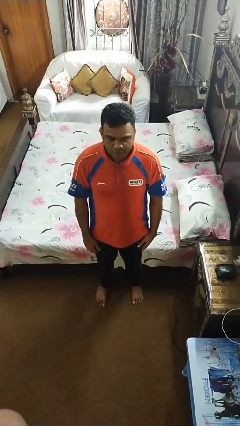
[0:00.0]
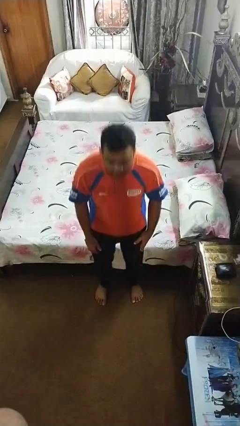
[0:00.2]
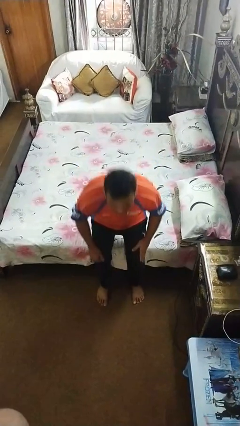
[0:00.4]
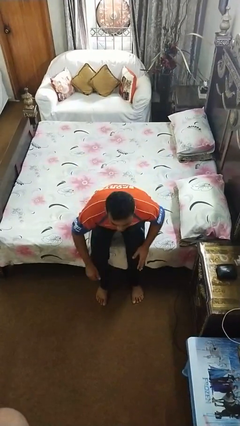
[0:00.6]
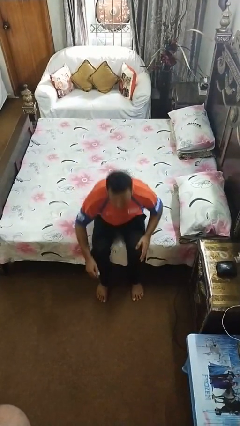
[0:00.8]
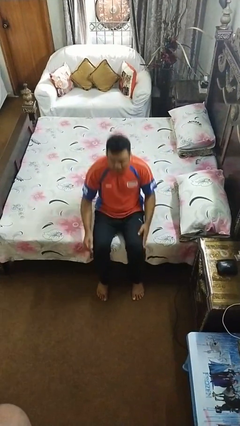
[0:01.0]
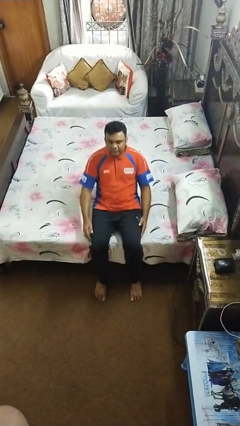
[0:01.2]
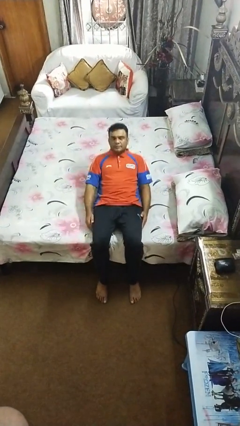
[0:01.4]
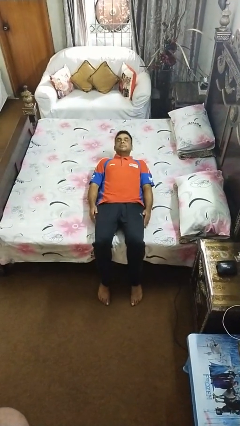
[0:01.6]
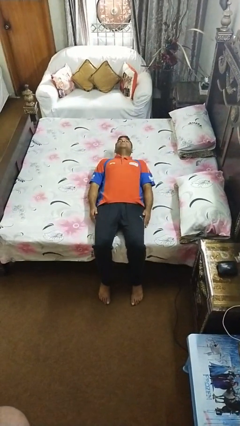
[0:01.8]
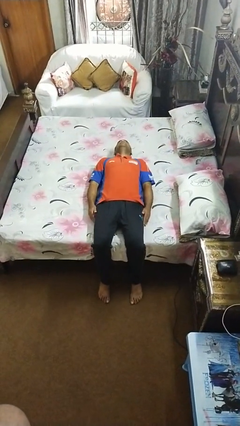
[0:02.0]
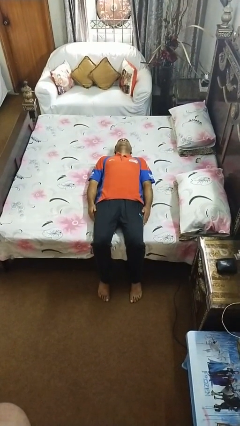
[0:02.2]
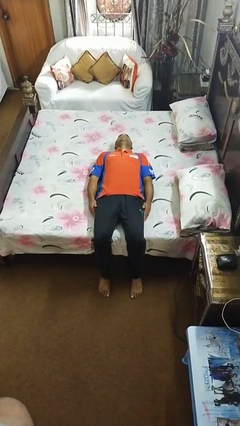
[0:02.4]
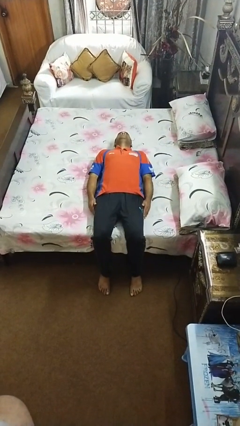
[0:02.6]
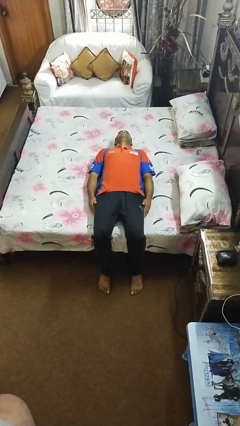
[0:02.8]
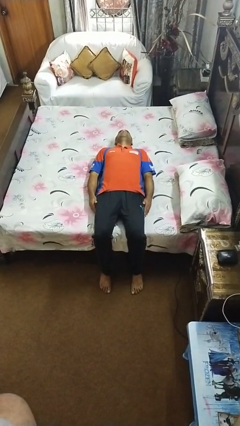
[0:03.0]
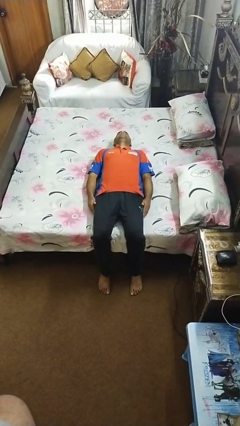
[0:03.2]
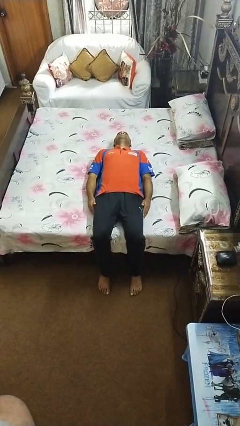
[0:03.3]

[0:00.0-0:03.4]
person lies down on bed

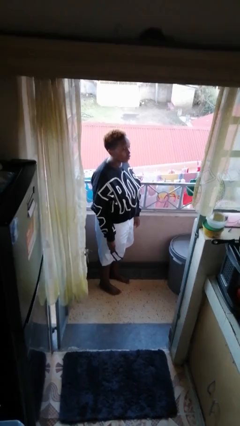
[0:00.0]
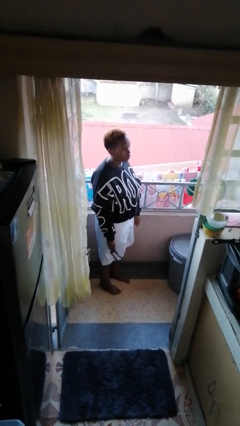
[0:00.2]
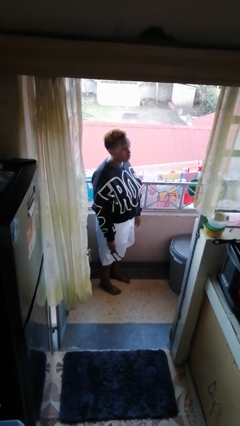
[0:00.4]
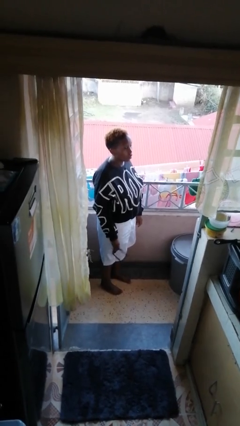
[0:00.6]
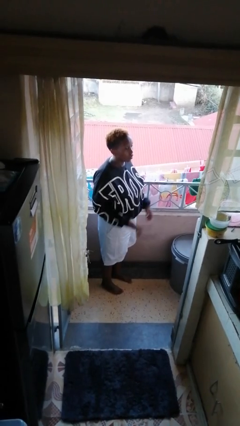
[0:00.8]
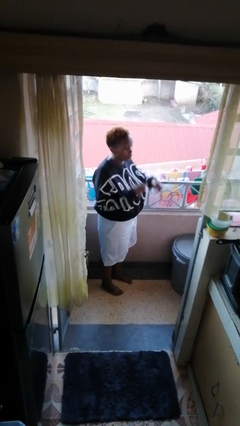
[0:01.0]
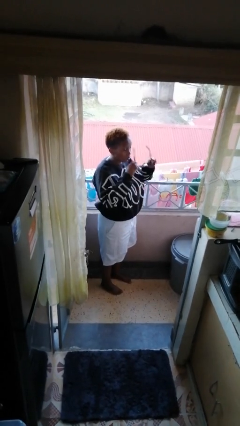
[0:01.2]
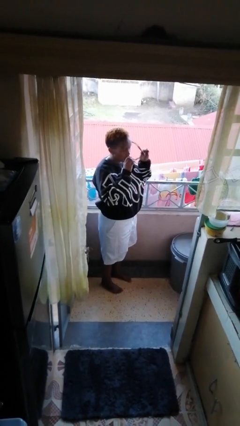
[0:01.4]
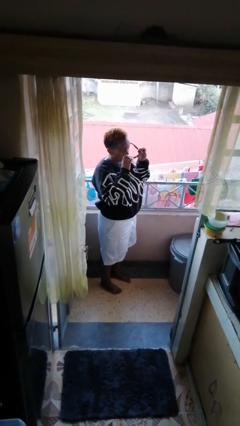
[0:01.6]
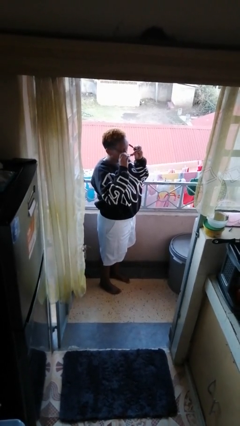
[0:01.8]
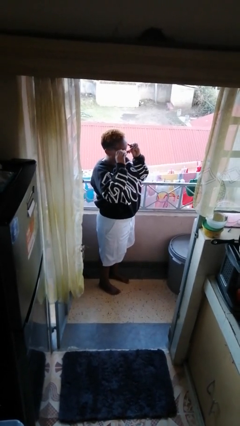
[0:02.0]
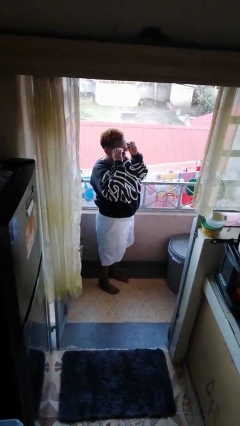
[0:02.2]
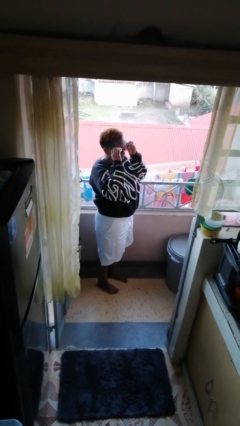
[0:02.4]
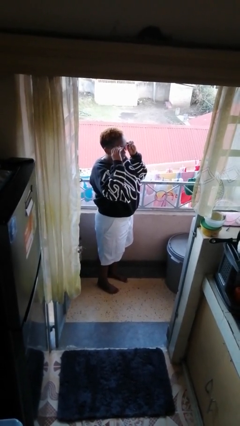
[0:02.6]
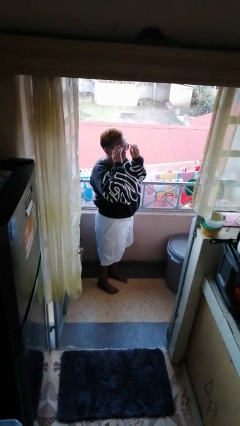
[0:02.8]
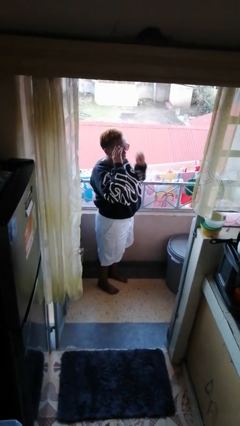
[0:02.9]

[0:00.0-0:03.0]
person puts on sunglasses

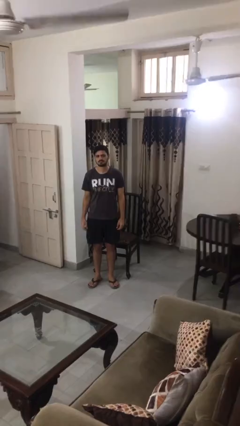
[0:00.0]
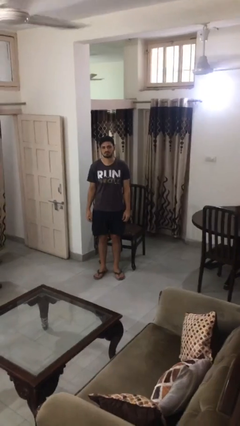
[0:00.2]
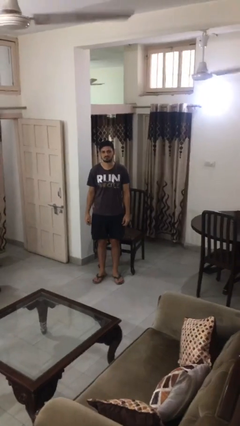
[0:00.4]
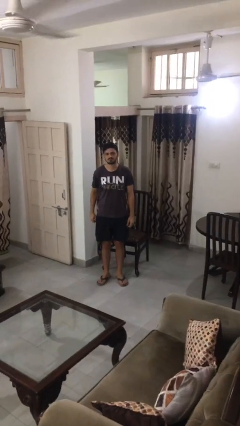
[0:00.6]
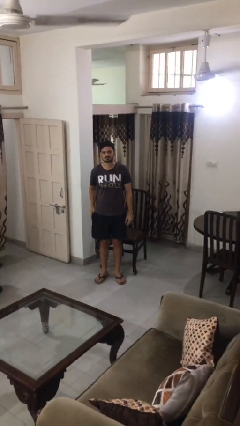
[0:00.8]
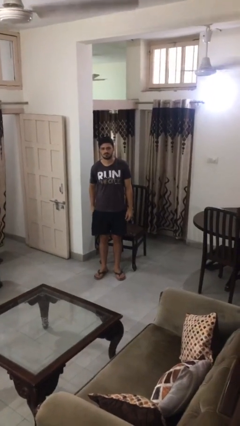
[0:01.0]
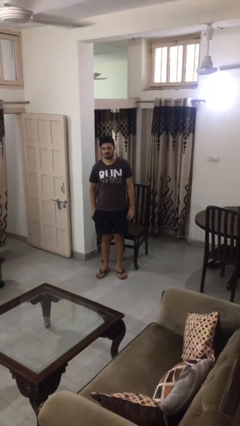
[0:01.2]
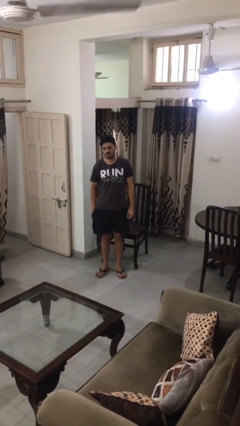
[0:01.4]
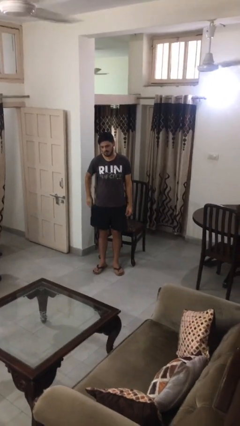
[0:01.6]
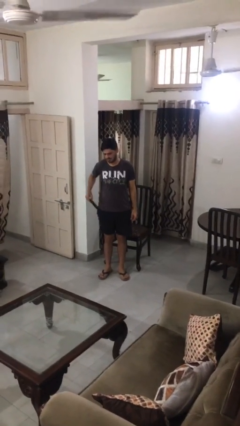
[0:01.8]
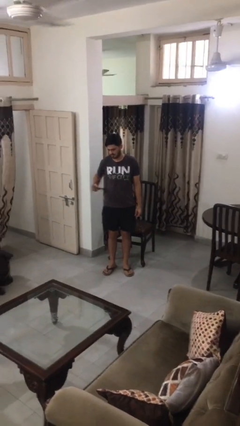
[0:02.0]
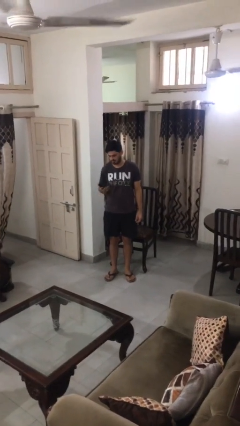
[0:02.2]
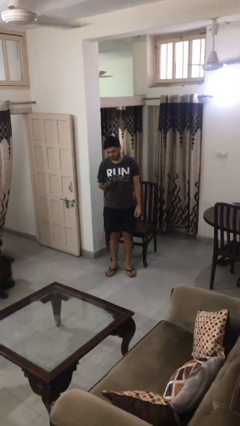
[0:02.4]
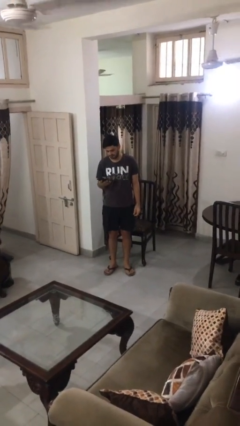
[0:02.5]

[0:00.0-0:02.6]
person takes phone from pocket

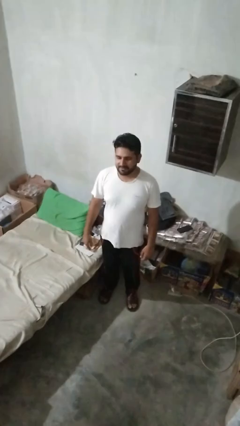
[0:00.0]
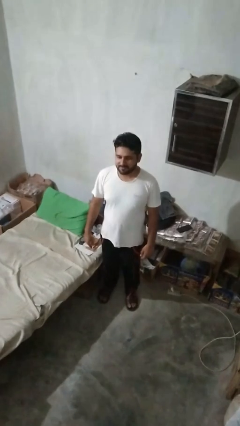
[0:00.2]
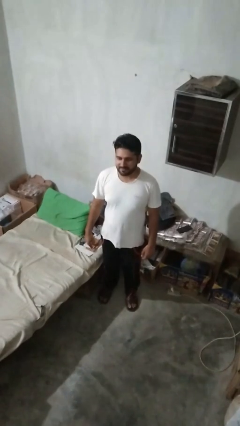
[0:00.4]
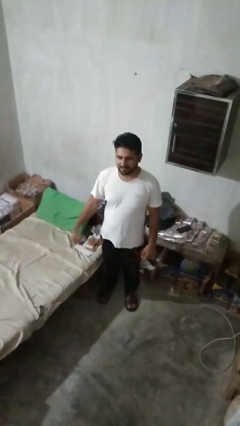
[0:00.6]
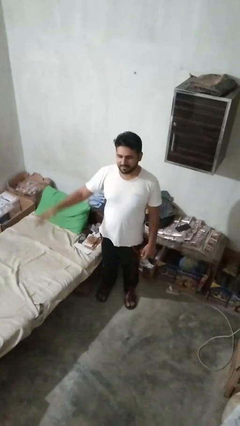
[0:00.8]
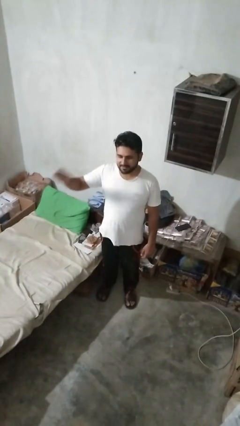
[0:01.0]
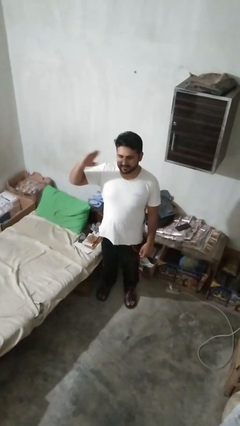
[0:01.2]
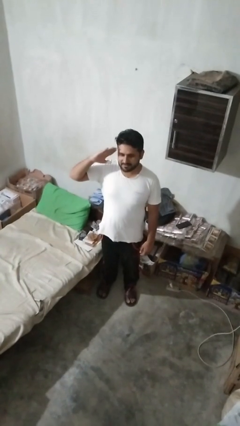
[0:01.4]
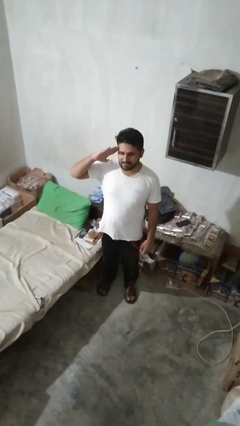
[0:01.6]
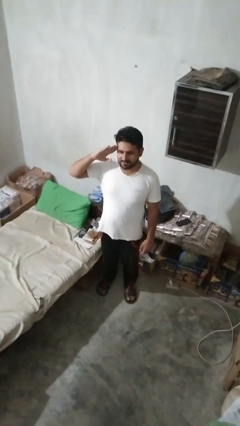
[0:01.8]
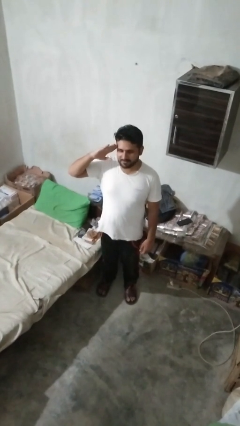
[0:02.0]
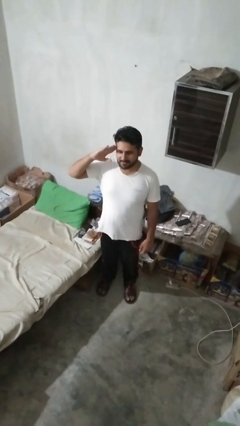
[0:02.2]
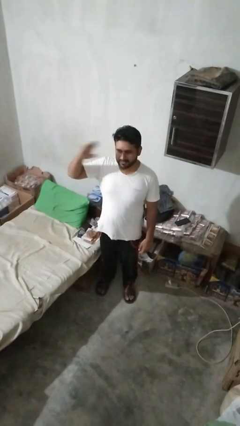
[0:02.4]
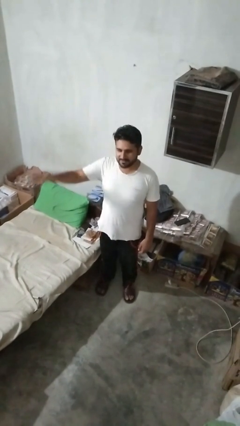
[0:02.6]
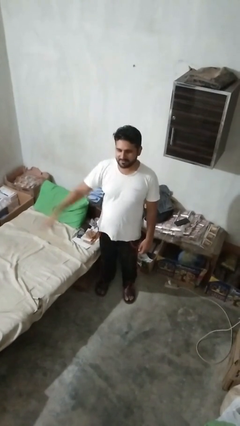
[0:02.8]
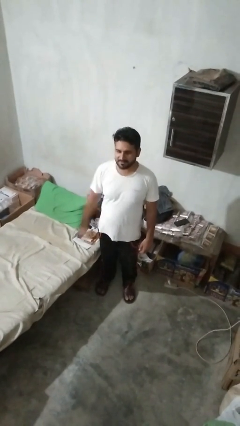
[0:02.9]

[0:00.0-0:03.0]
person salutes

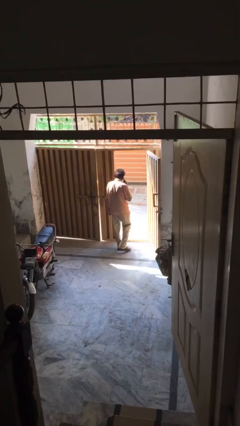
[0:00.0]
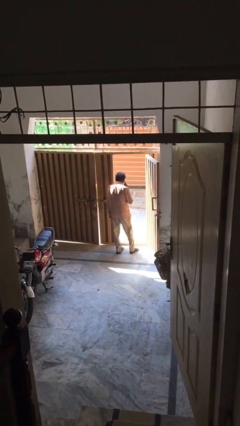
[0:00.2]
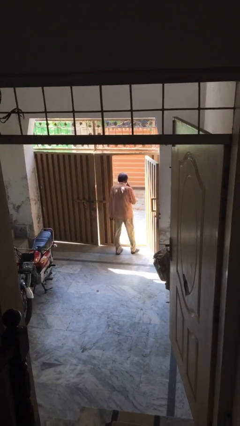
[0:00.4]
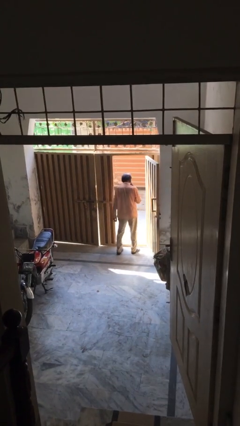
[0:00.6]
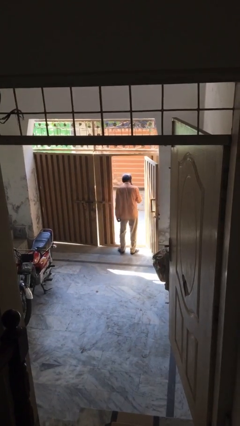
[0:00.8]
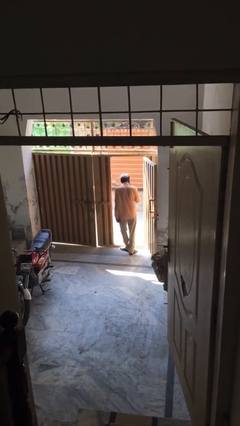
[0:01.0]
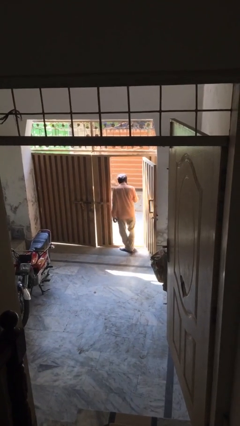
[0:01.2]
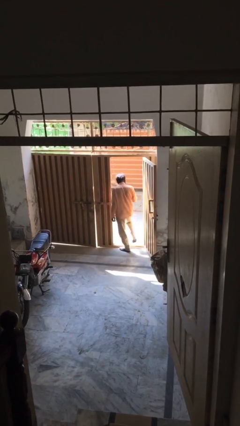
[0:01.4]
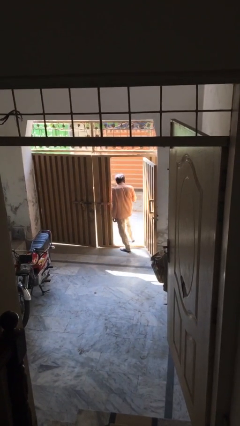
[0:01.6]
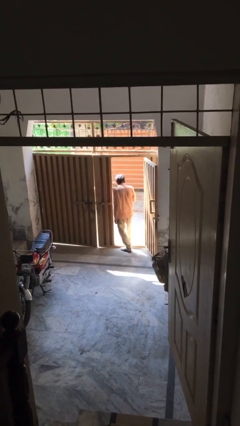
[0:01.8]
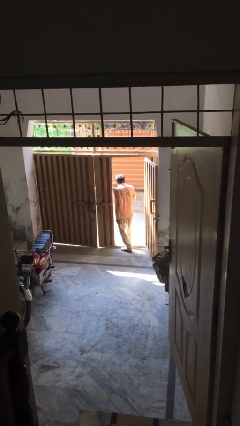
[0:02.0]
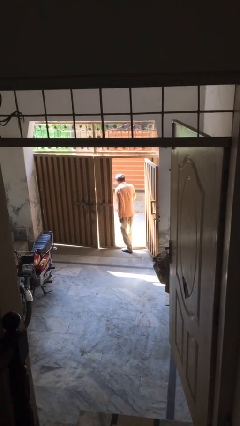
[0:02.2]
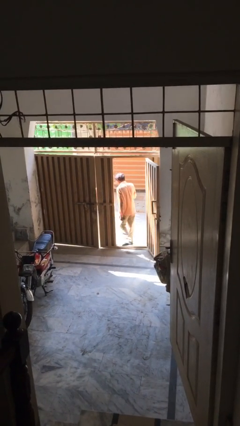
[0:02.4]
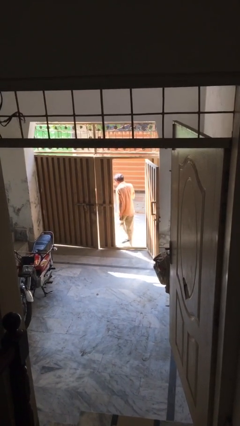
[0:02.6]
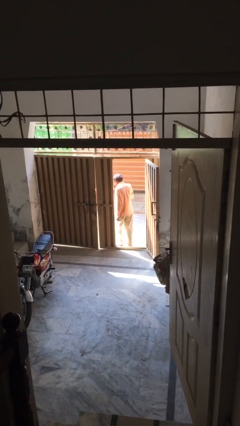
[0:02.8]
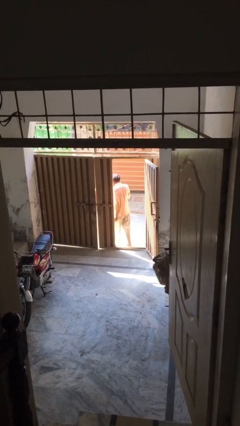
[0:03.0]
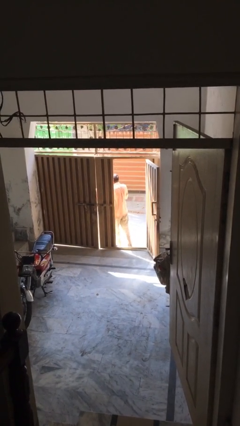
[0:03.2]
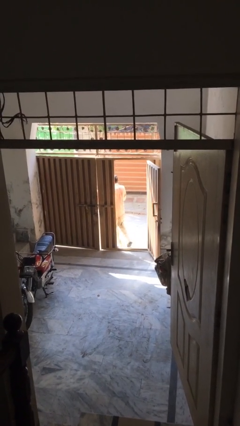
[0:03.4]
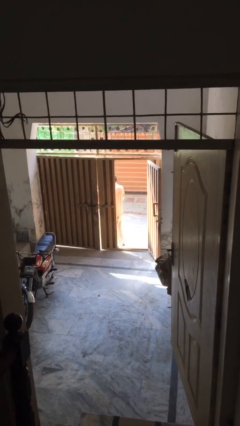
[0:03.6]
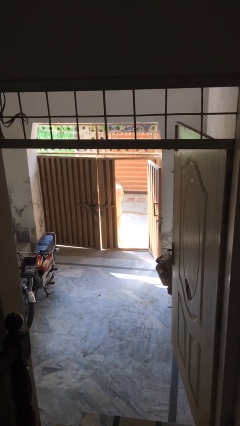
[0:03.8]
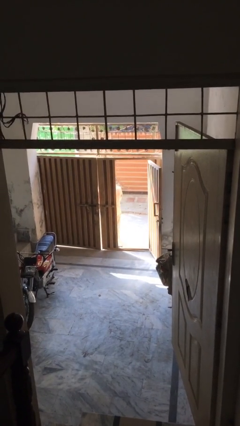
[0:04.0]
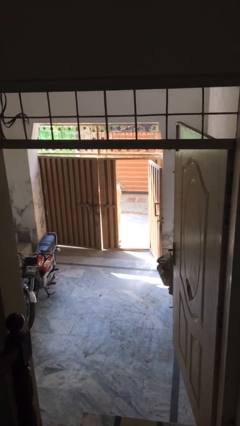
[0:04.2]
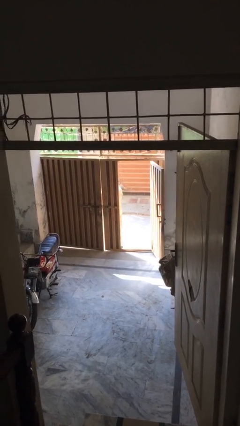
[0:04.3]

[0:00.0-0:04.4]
person exits scene through structure

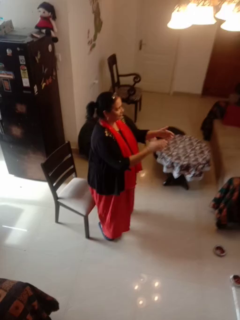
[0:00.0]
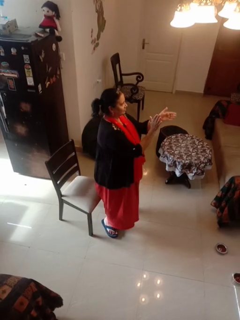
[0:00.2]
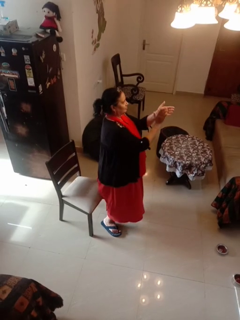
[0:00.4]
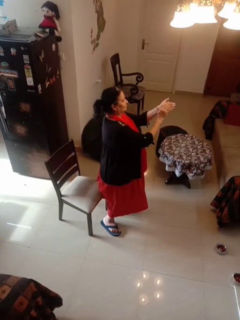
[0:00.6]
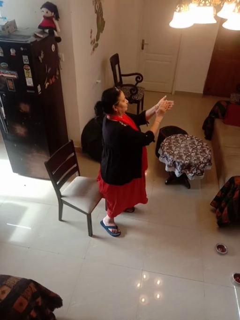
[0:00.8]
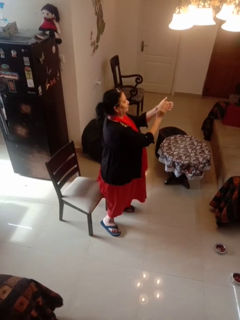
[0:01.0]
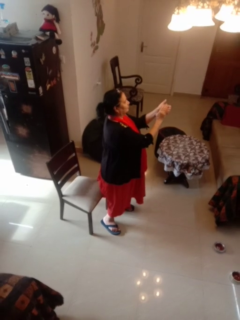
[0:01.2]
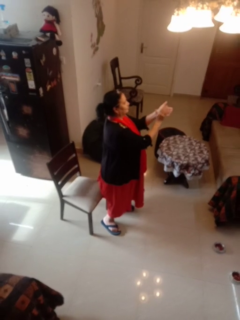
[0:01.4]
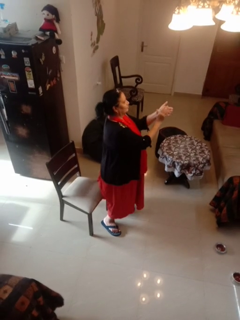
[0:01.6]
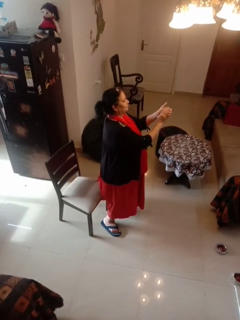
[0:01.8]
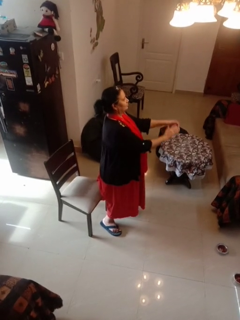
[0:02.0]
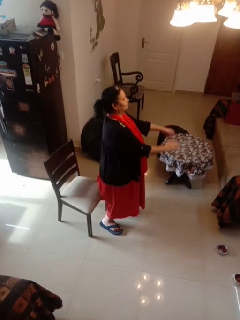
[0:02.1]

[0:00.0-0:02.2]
person claps hands
